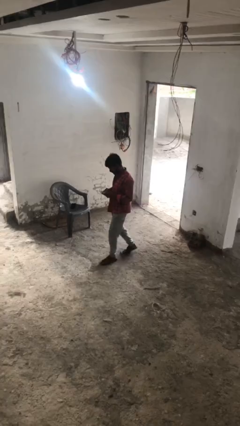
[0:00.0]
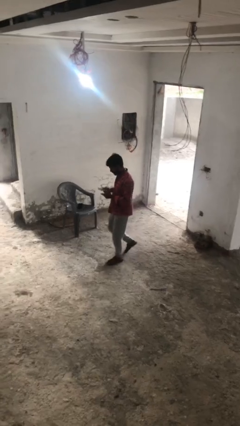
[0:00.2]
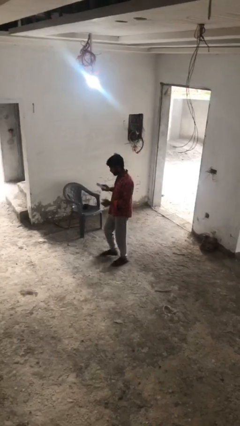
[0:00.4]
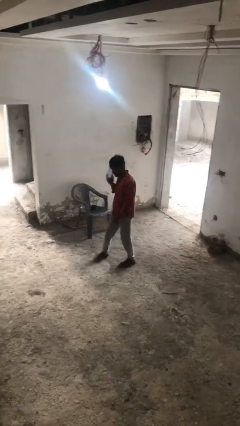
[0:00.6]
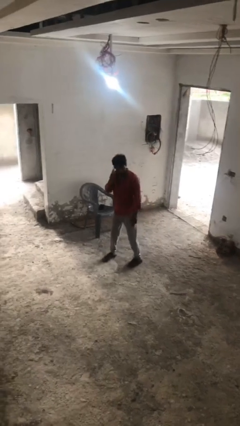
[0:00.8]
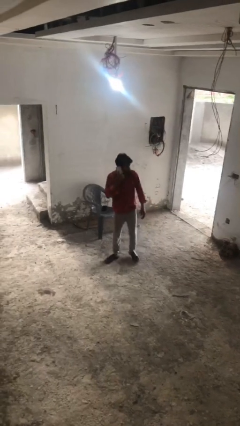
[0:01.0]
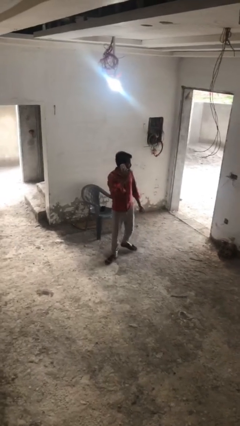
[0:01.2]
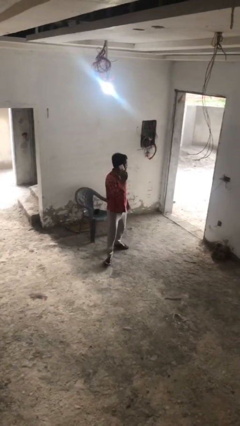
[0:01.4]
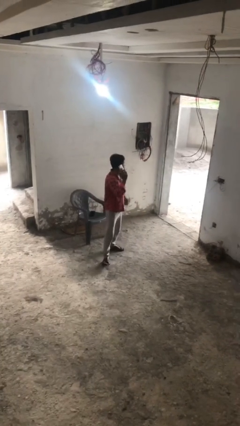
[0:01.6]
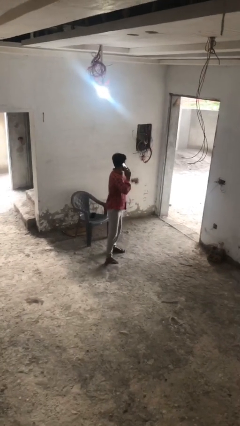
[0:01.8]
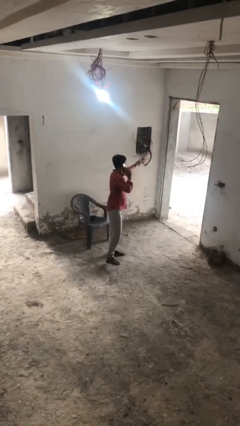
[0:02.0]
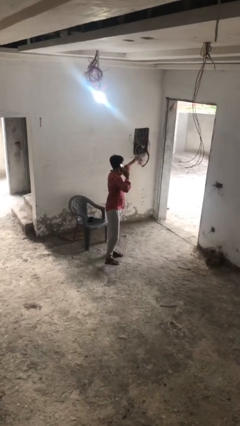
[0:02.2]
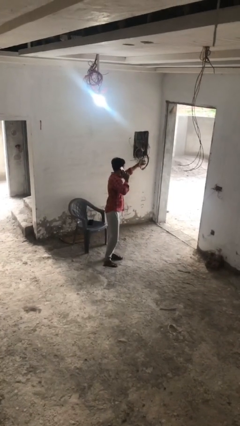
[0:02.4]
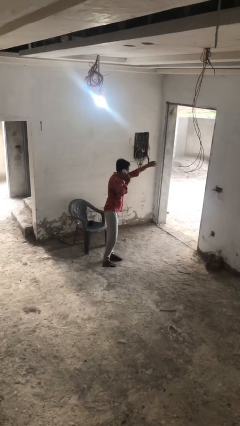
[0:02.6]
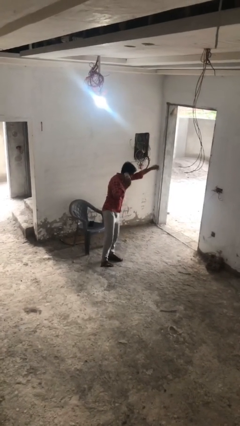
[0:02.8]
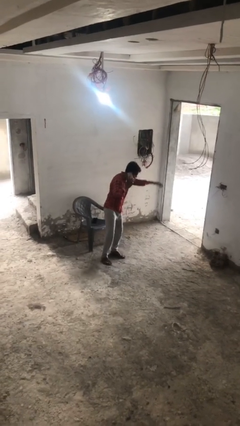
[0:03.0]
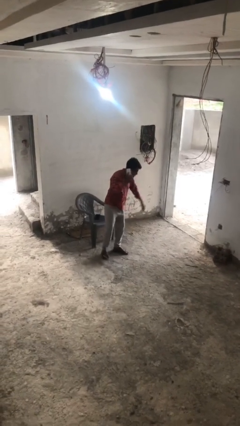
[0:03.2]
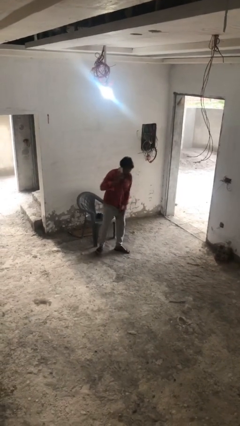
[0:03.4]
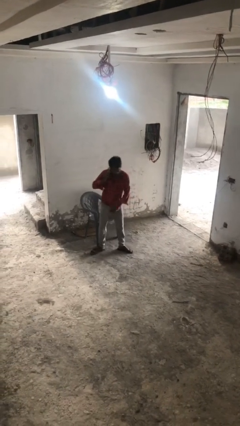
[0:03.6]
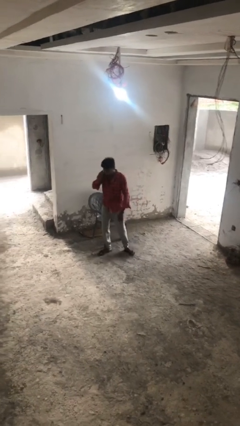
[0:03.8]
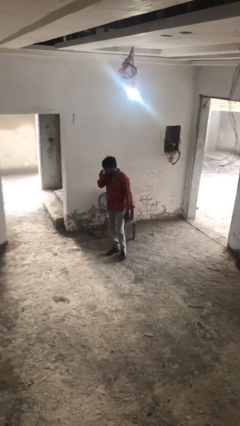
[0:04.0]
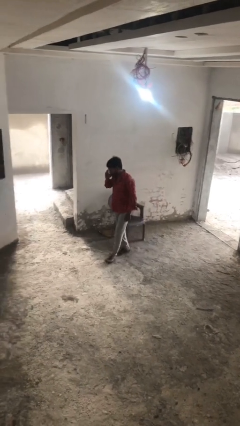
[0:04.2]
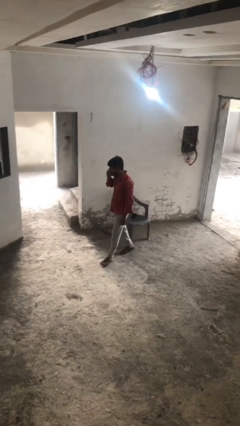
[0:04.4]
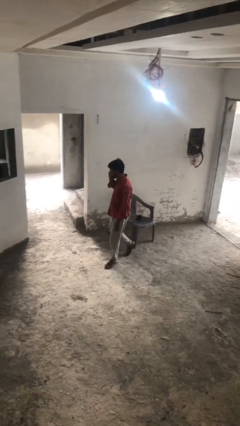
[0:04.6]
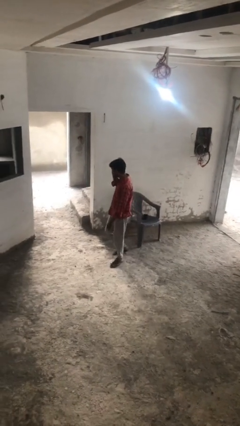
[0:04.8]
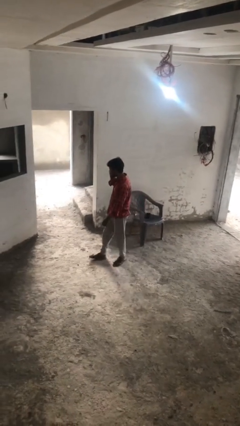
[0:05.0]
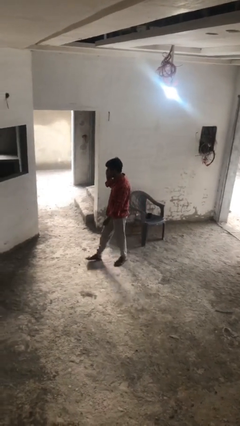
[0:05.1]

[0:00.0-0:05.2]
person talks on phone

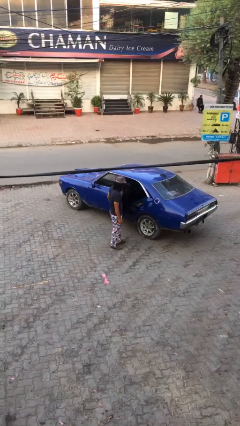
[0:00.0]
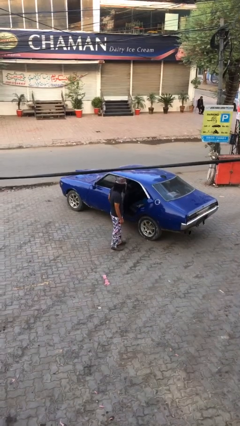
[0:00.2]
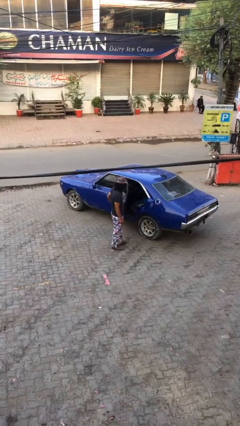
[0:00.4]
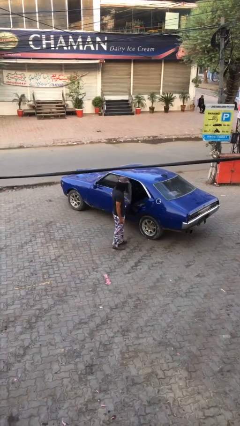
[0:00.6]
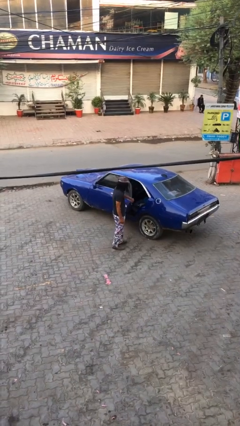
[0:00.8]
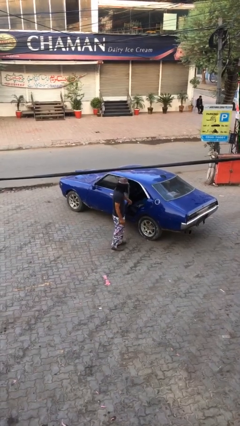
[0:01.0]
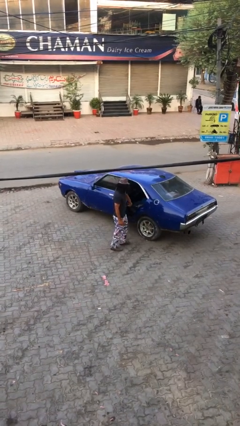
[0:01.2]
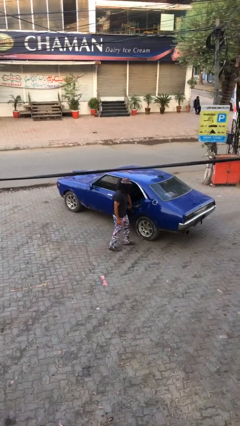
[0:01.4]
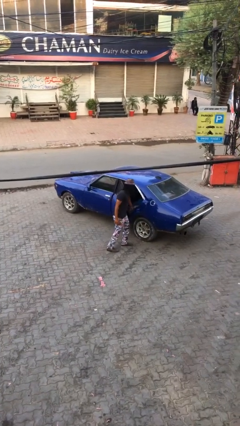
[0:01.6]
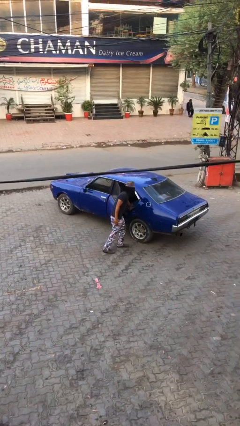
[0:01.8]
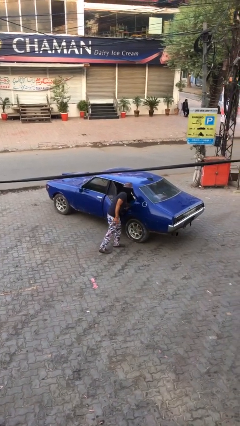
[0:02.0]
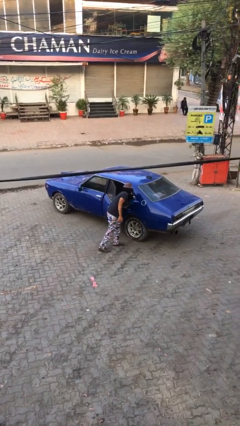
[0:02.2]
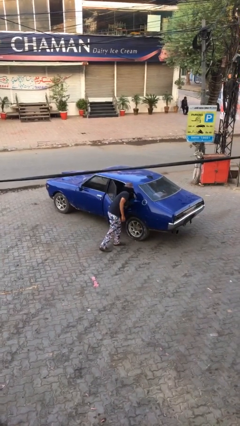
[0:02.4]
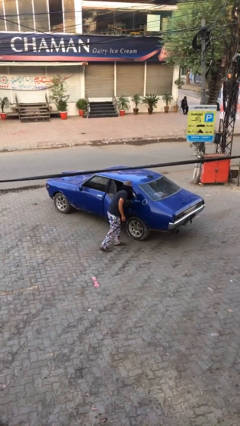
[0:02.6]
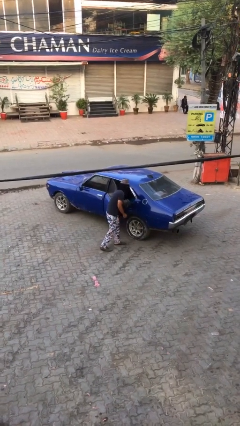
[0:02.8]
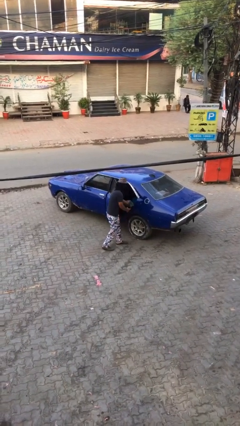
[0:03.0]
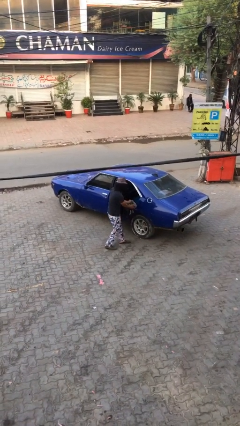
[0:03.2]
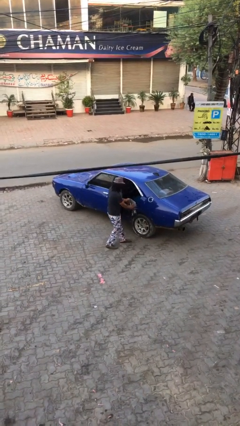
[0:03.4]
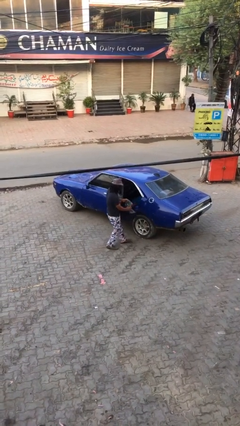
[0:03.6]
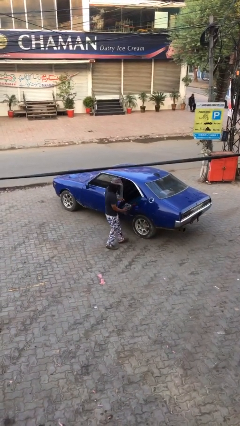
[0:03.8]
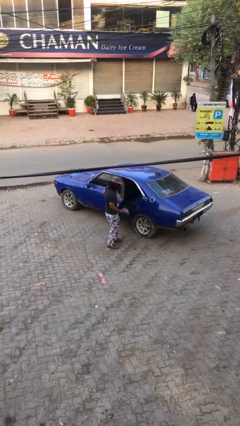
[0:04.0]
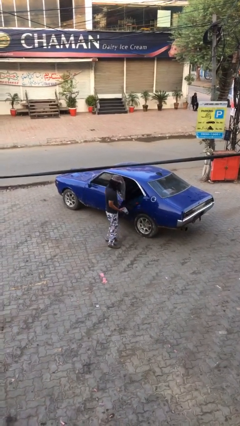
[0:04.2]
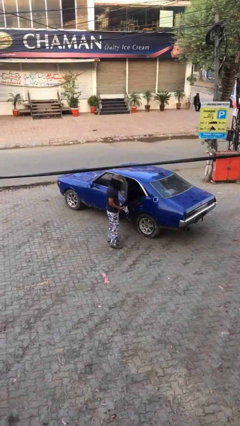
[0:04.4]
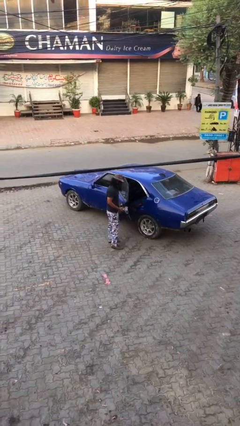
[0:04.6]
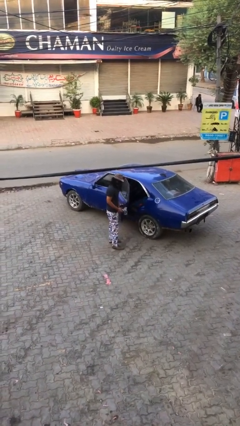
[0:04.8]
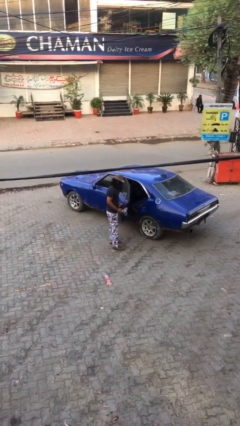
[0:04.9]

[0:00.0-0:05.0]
person unloads car

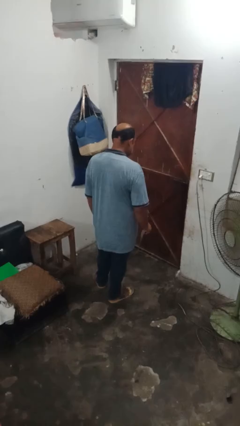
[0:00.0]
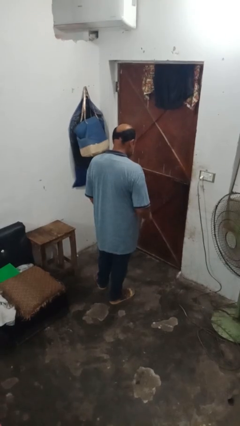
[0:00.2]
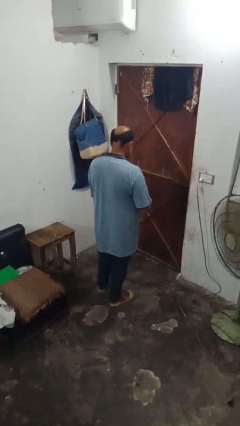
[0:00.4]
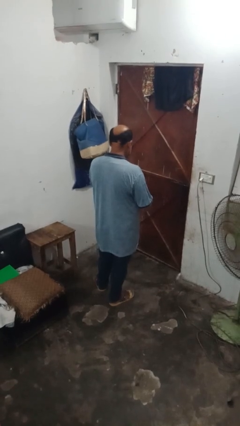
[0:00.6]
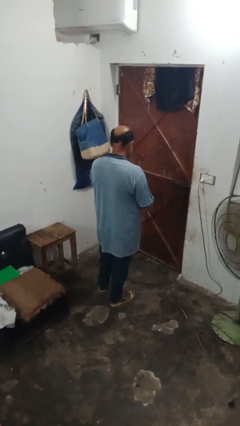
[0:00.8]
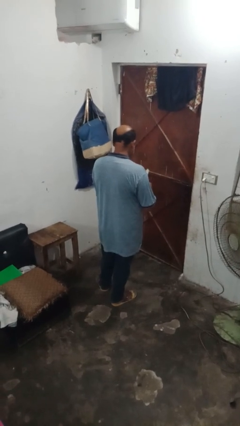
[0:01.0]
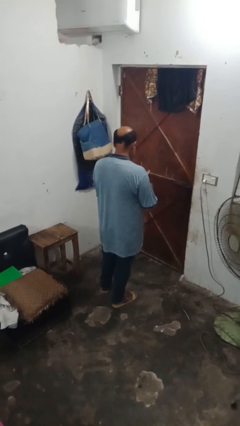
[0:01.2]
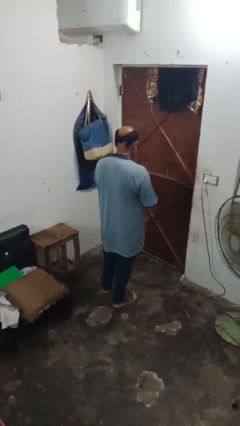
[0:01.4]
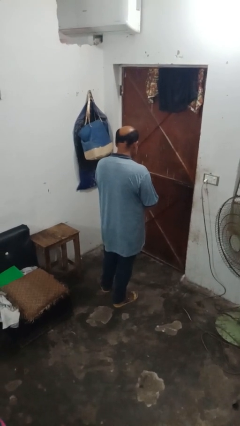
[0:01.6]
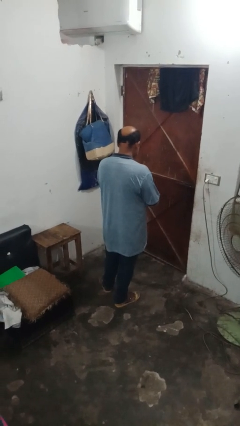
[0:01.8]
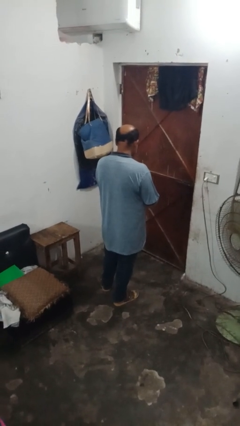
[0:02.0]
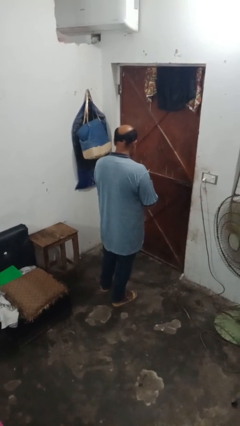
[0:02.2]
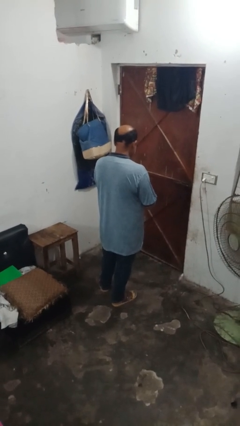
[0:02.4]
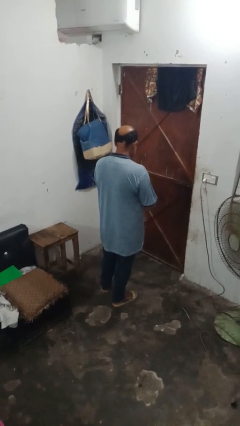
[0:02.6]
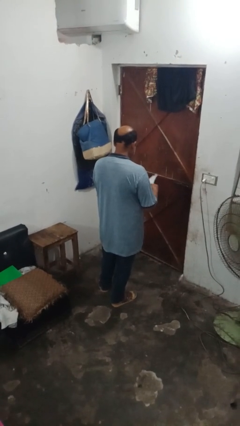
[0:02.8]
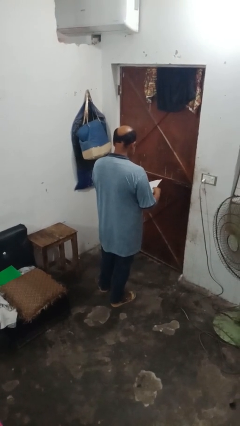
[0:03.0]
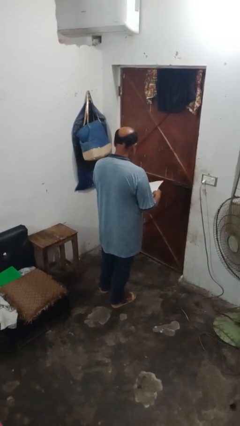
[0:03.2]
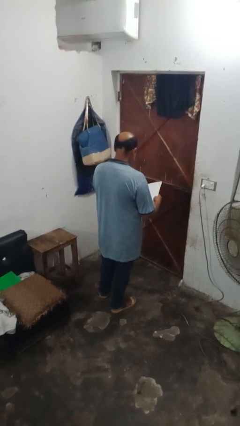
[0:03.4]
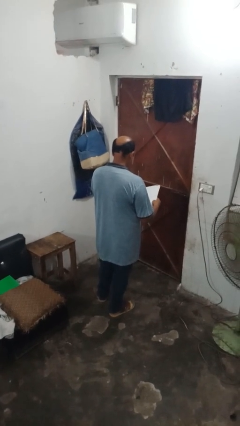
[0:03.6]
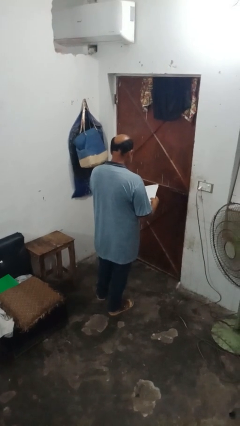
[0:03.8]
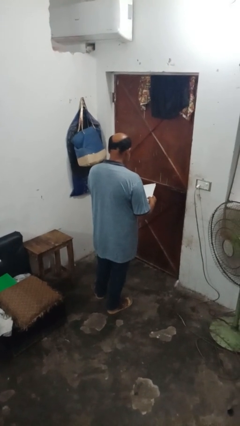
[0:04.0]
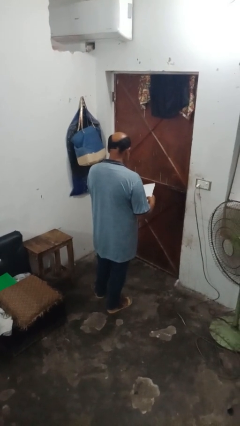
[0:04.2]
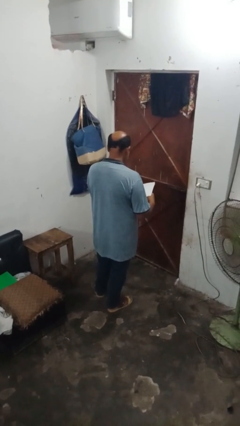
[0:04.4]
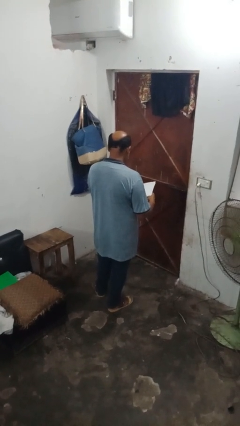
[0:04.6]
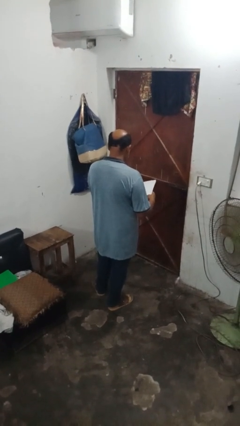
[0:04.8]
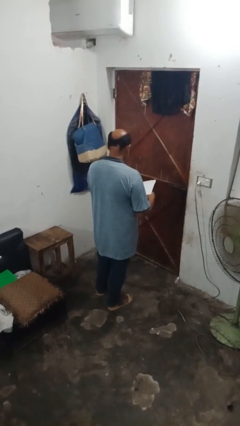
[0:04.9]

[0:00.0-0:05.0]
person reads magazine

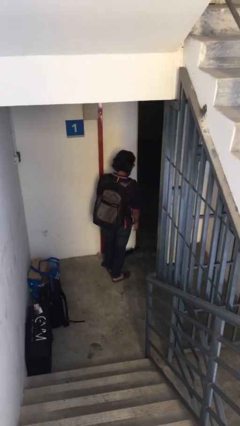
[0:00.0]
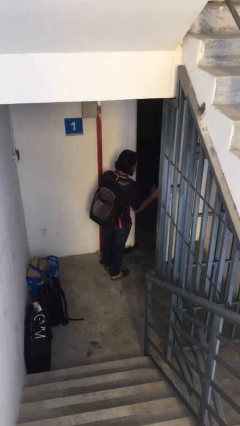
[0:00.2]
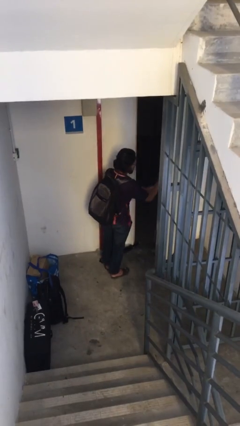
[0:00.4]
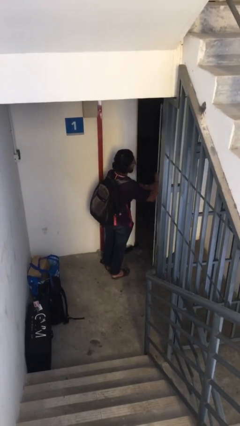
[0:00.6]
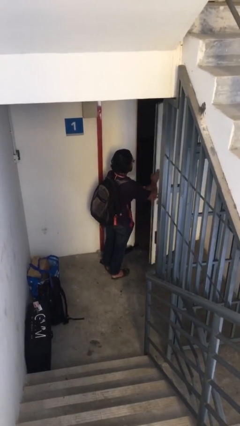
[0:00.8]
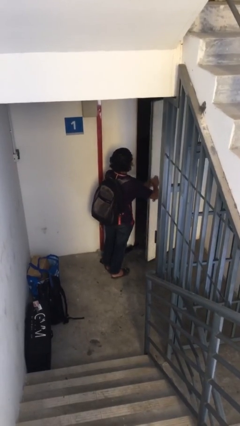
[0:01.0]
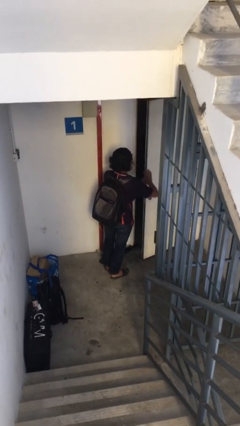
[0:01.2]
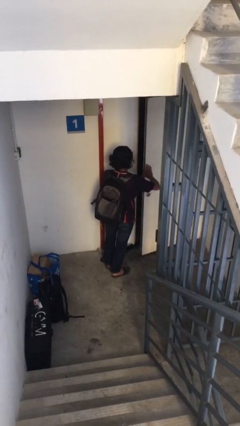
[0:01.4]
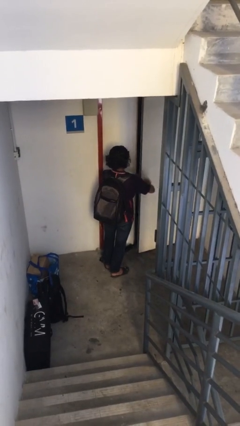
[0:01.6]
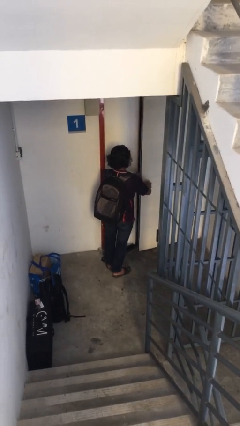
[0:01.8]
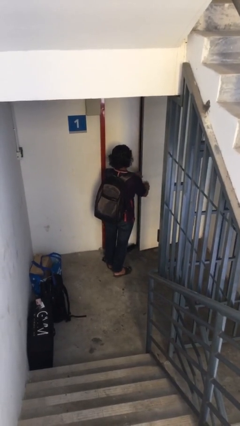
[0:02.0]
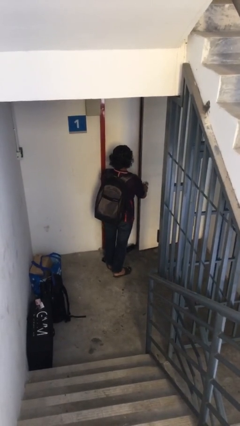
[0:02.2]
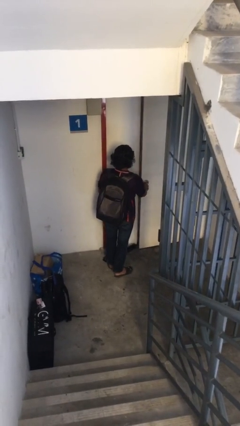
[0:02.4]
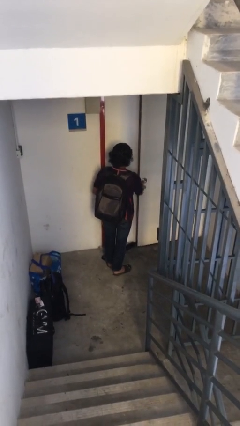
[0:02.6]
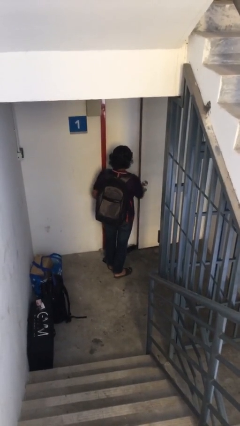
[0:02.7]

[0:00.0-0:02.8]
person closes facility door
